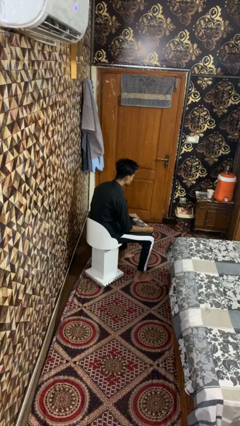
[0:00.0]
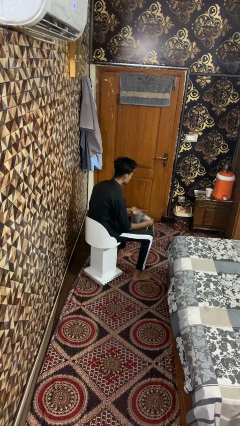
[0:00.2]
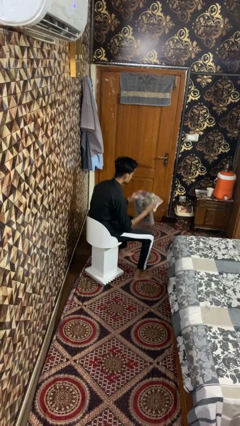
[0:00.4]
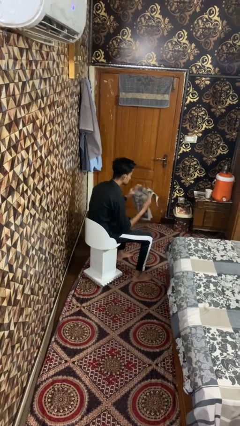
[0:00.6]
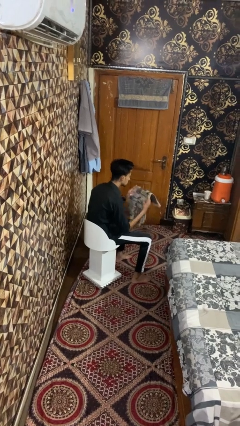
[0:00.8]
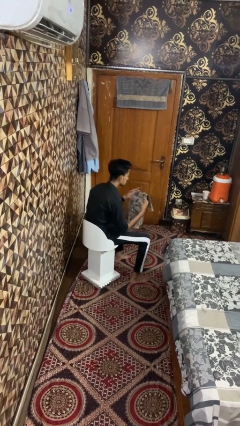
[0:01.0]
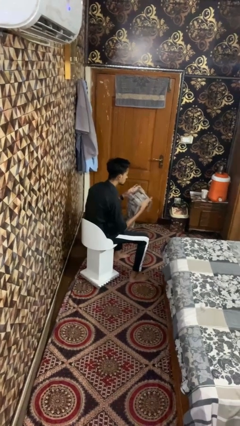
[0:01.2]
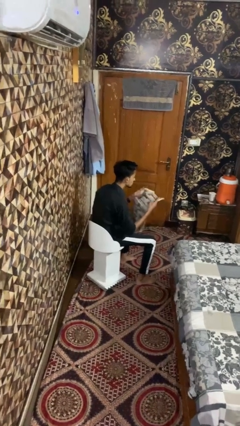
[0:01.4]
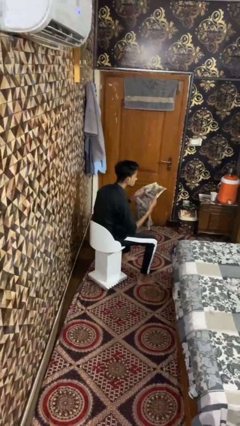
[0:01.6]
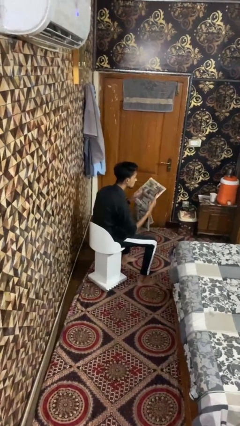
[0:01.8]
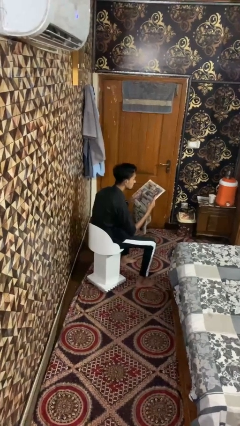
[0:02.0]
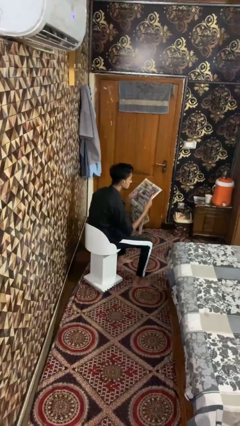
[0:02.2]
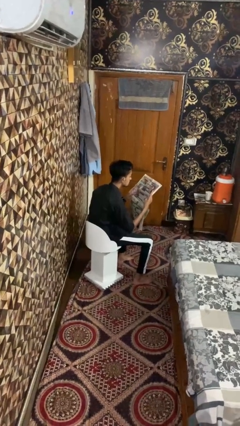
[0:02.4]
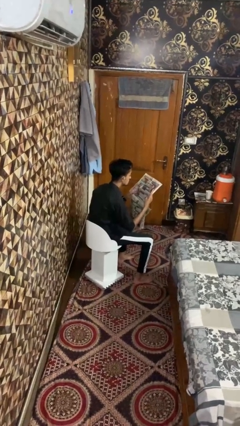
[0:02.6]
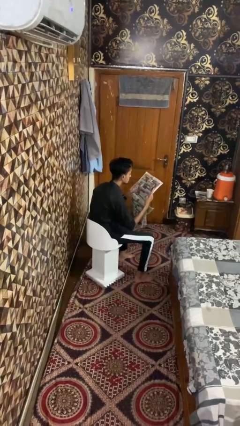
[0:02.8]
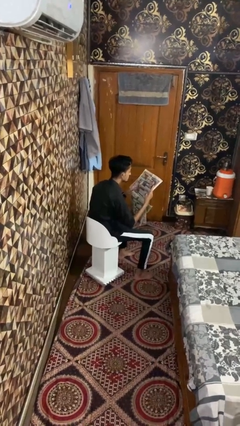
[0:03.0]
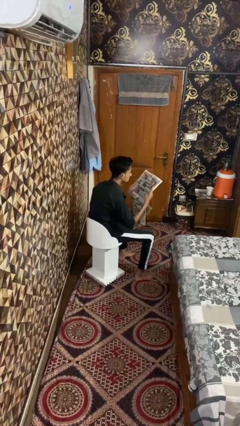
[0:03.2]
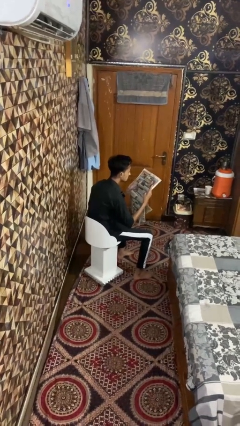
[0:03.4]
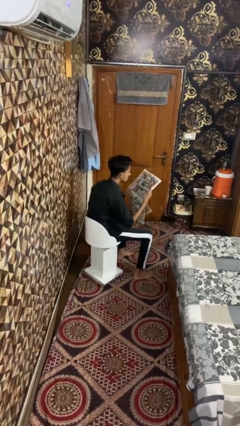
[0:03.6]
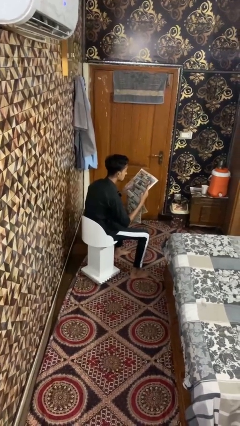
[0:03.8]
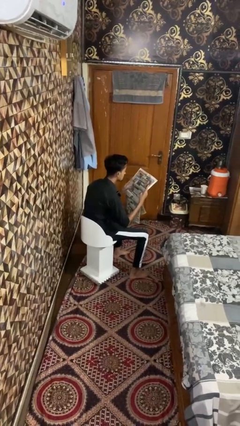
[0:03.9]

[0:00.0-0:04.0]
person reads newspaper

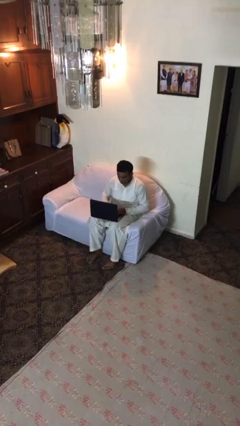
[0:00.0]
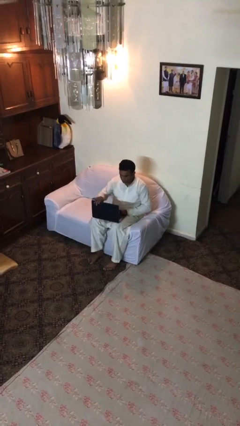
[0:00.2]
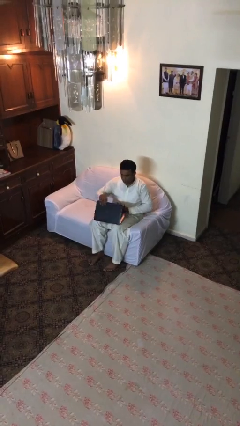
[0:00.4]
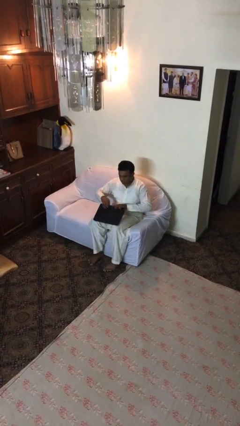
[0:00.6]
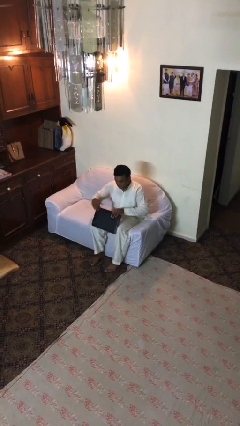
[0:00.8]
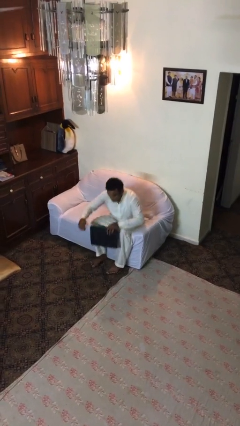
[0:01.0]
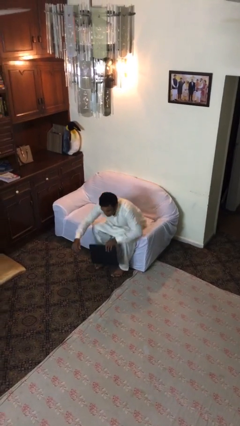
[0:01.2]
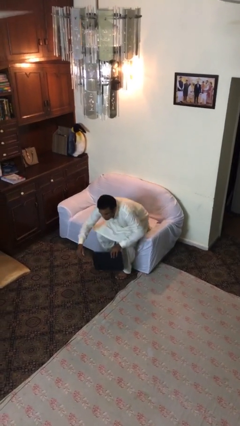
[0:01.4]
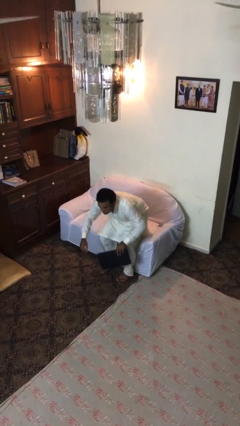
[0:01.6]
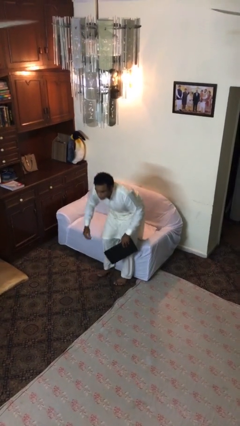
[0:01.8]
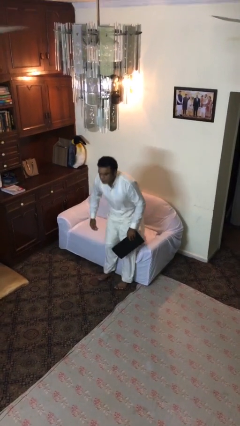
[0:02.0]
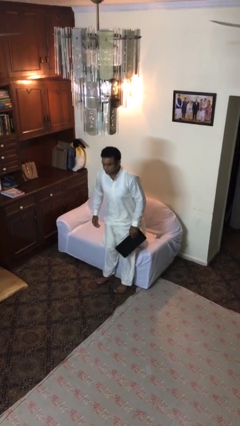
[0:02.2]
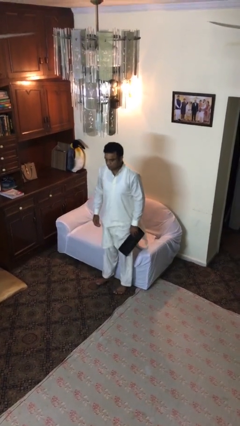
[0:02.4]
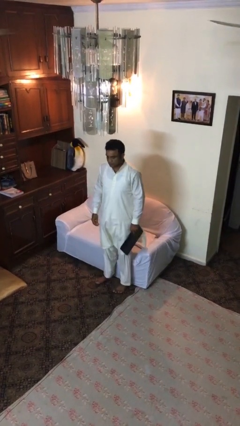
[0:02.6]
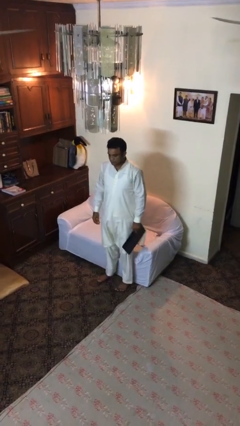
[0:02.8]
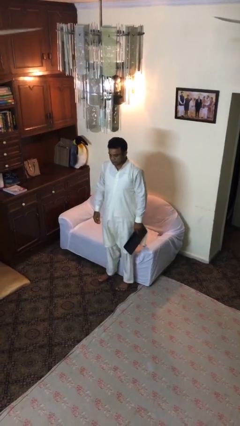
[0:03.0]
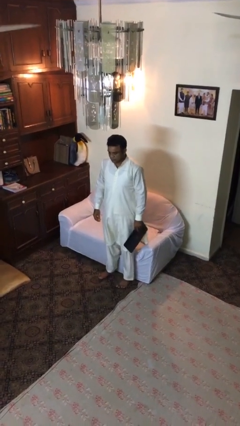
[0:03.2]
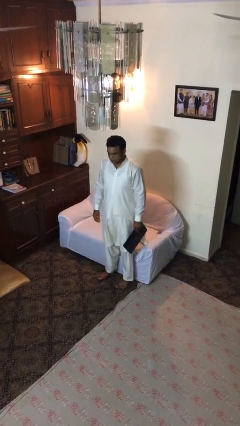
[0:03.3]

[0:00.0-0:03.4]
person stands up

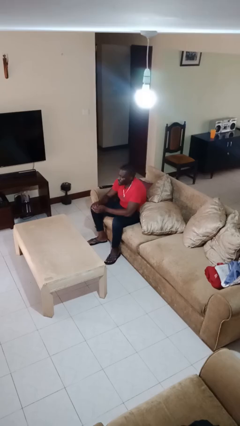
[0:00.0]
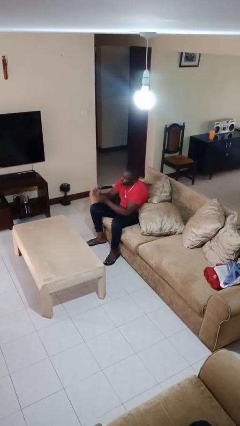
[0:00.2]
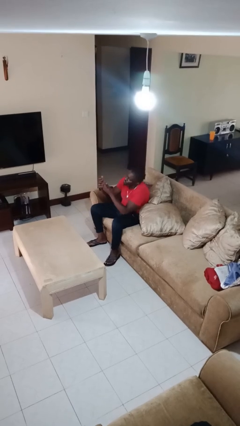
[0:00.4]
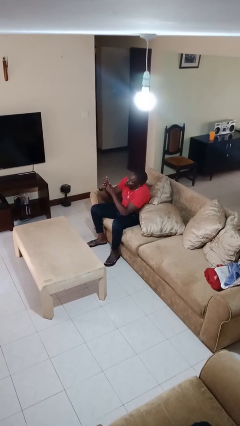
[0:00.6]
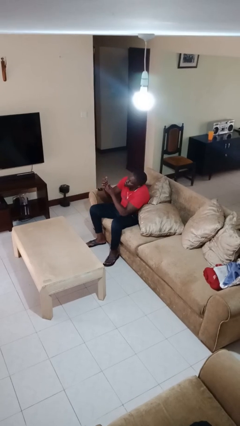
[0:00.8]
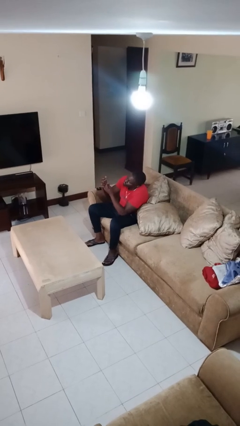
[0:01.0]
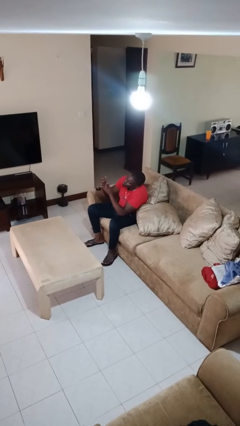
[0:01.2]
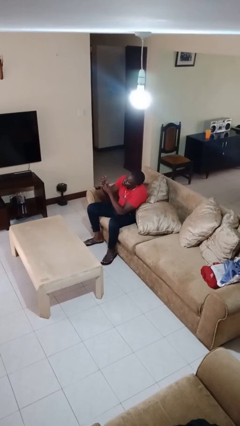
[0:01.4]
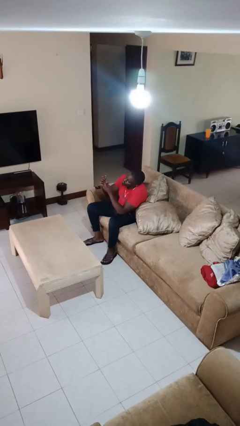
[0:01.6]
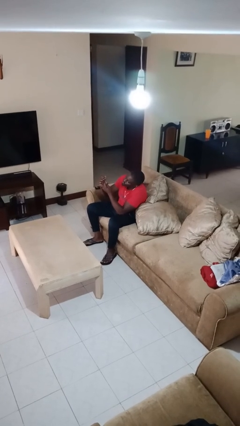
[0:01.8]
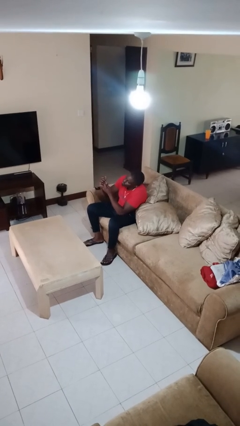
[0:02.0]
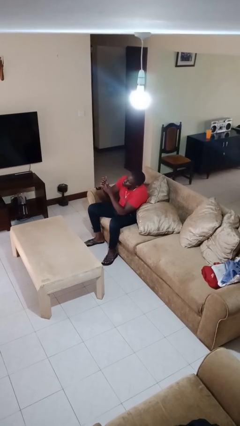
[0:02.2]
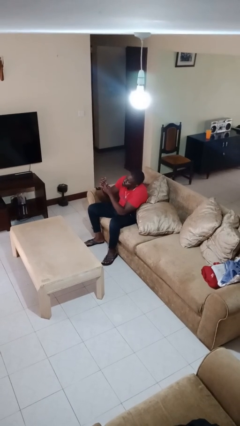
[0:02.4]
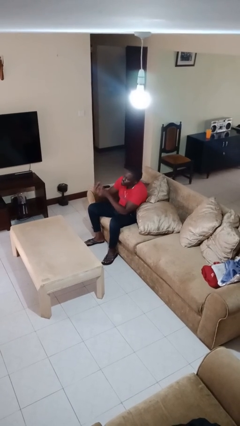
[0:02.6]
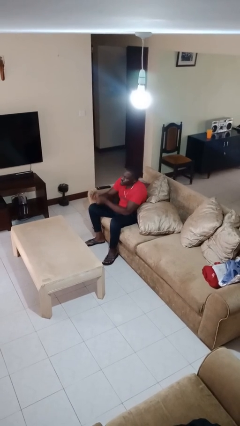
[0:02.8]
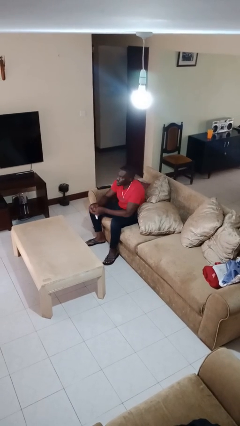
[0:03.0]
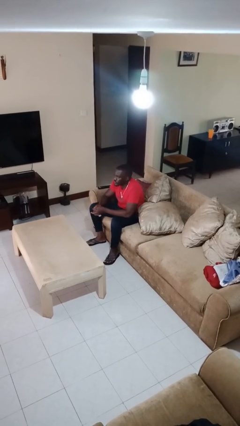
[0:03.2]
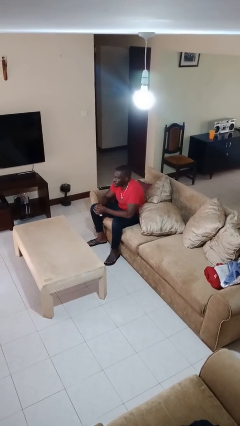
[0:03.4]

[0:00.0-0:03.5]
person clips fingernails

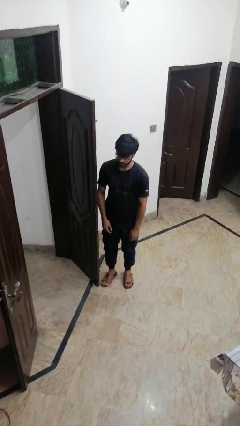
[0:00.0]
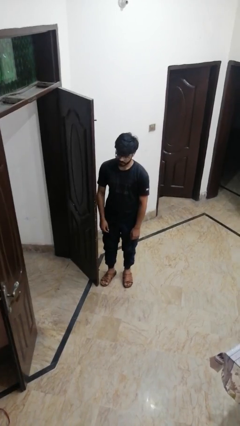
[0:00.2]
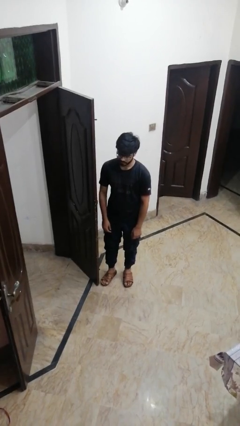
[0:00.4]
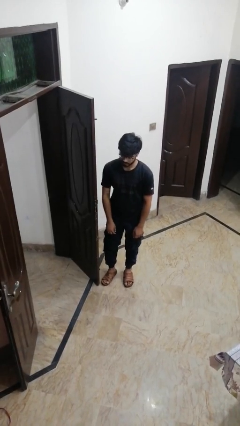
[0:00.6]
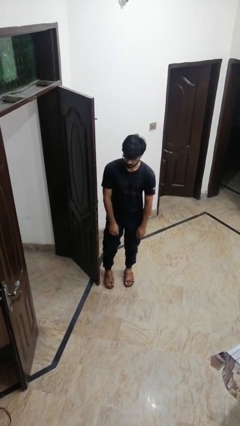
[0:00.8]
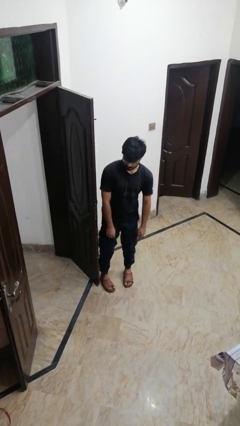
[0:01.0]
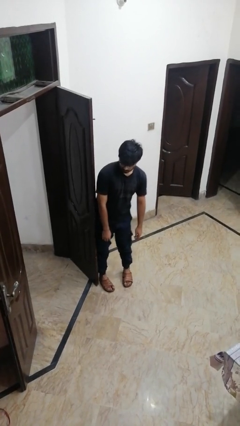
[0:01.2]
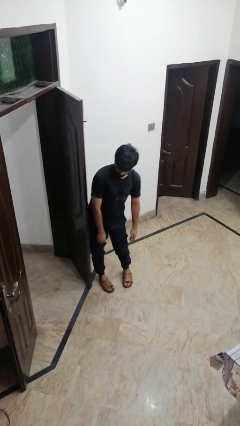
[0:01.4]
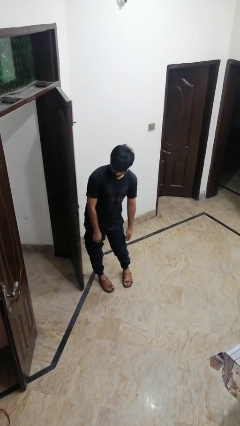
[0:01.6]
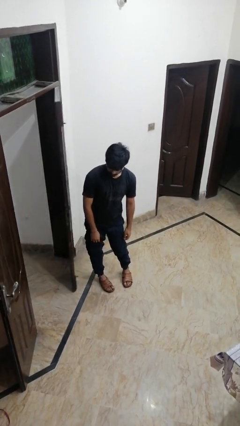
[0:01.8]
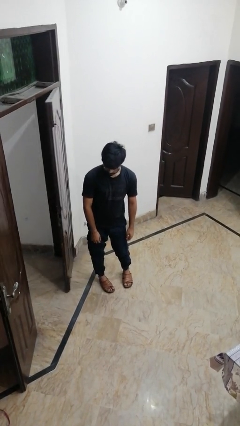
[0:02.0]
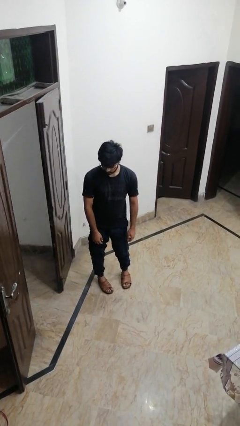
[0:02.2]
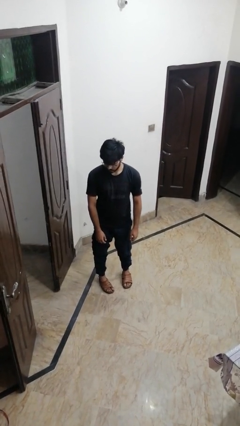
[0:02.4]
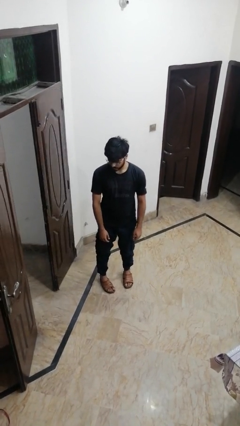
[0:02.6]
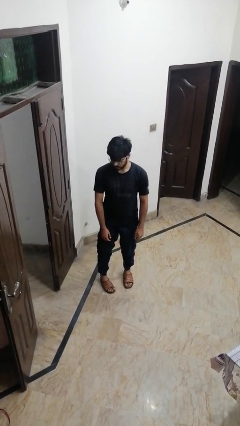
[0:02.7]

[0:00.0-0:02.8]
person closes door with hip

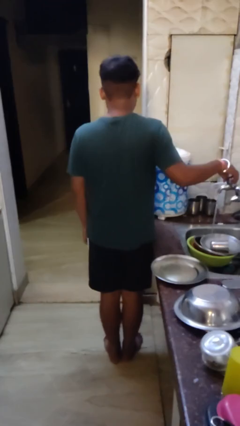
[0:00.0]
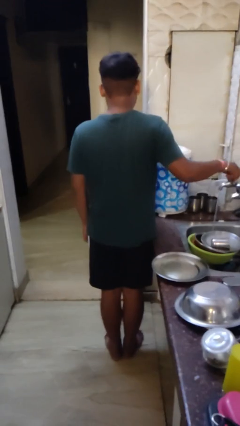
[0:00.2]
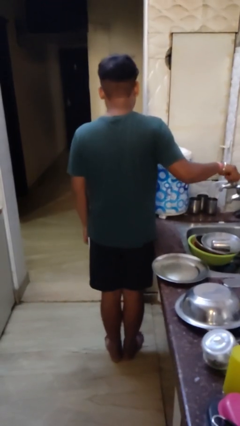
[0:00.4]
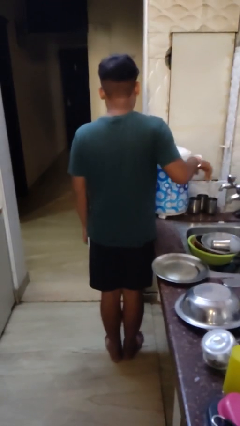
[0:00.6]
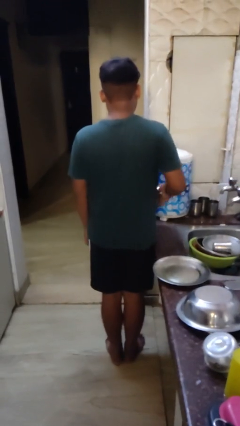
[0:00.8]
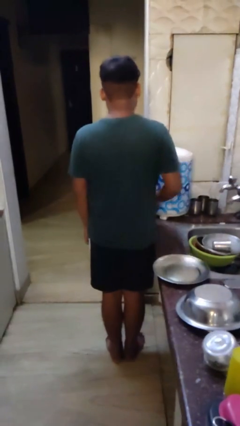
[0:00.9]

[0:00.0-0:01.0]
person turns off faucet

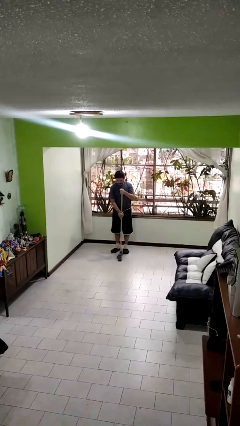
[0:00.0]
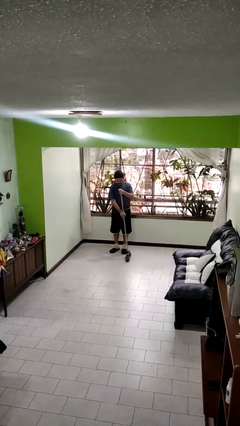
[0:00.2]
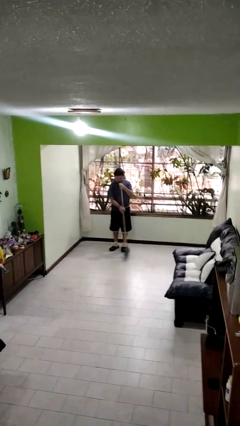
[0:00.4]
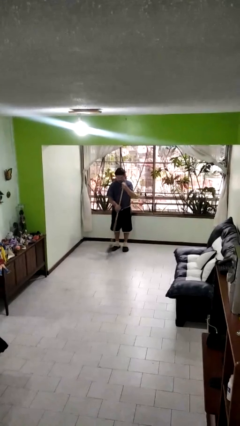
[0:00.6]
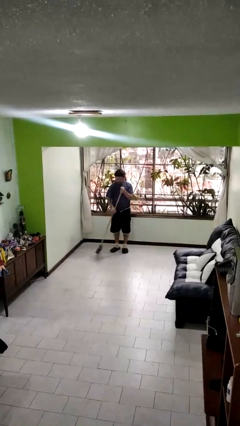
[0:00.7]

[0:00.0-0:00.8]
person sweeps floor

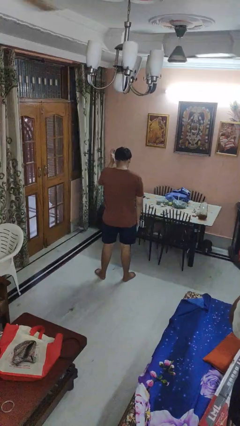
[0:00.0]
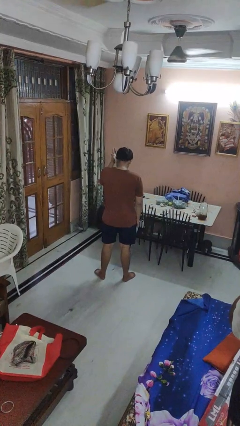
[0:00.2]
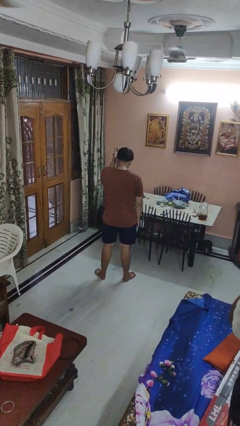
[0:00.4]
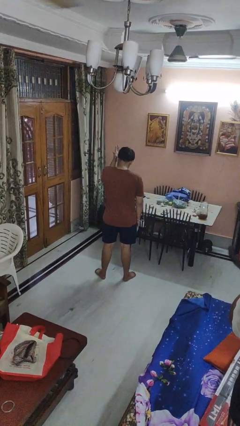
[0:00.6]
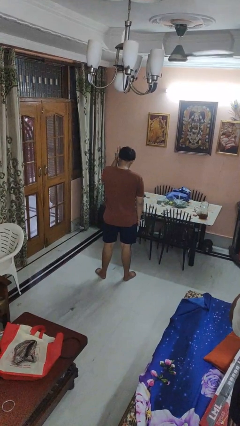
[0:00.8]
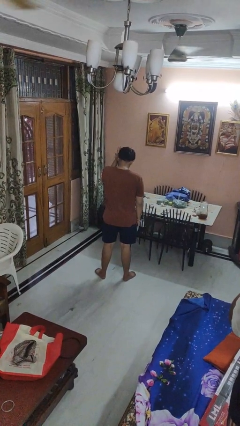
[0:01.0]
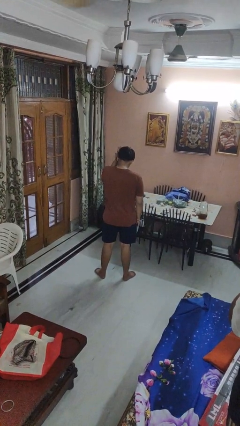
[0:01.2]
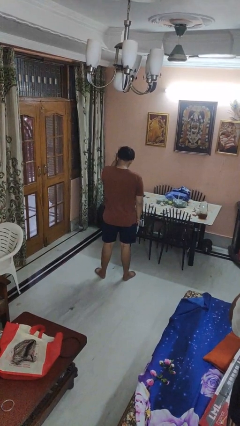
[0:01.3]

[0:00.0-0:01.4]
person pats head

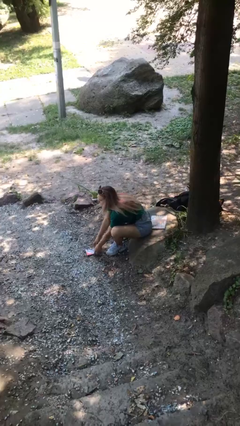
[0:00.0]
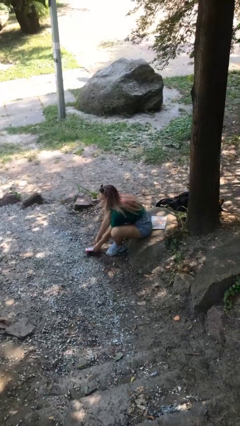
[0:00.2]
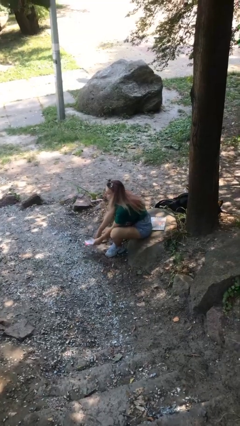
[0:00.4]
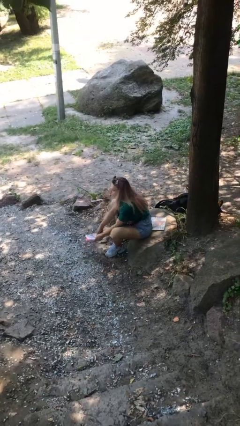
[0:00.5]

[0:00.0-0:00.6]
person picks up object from floor
